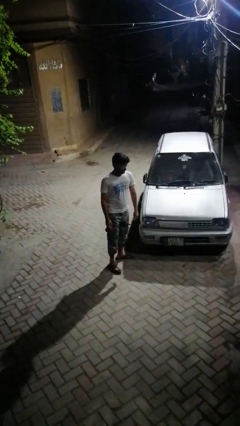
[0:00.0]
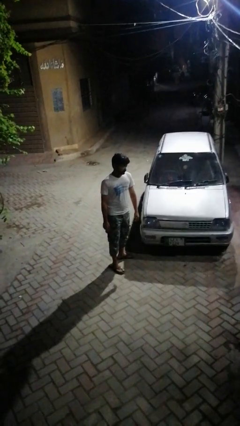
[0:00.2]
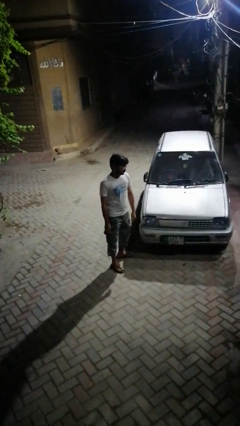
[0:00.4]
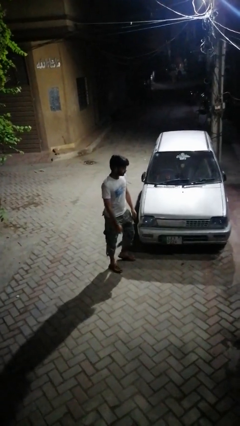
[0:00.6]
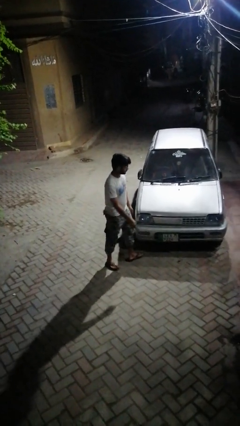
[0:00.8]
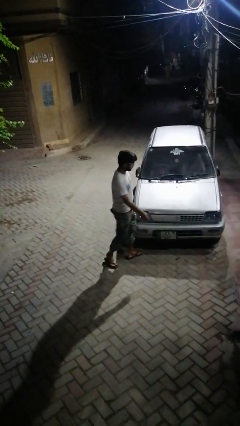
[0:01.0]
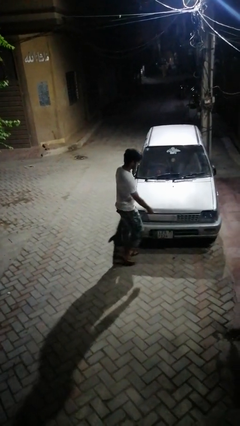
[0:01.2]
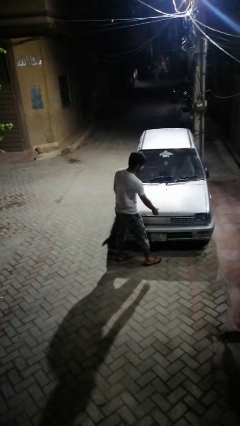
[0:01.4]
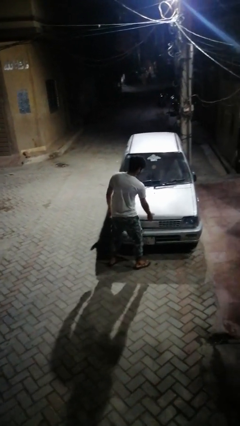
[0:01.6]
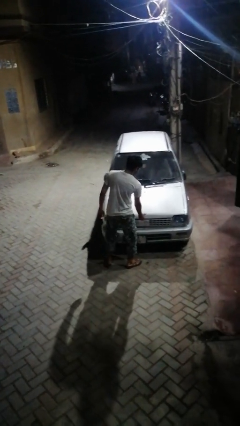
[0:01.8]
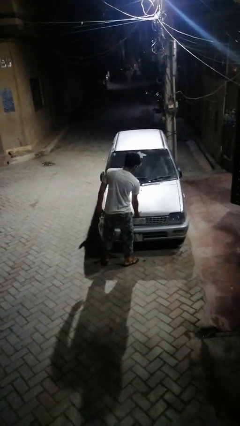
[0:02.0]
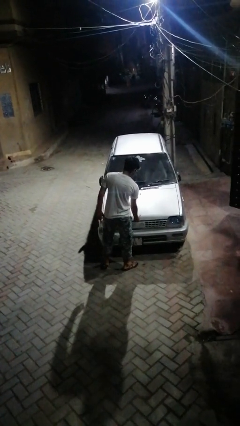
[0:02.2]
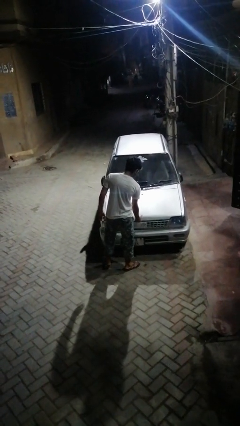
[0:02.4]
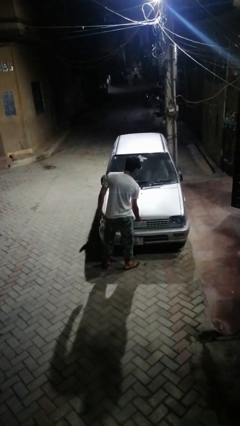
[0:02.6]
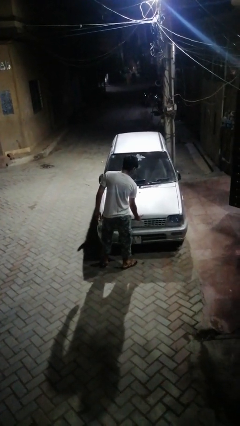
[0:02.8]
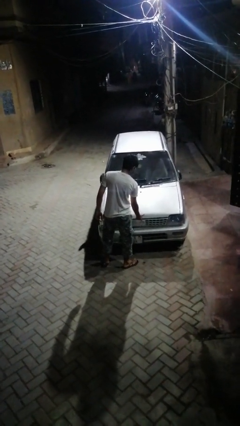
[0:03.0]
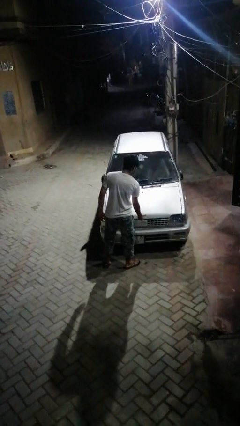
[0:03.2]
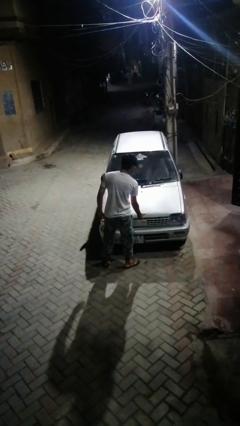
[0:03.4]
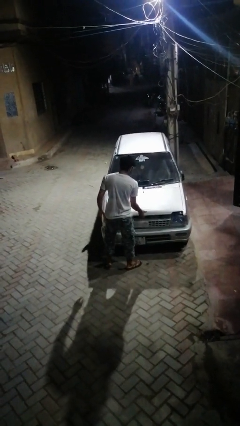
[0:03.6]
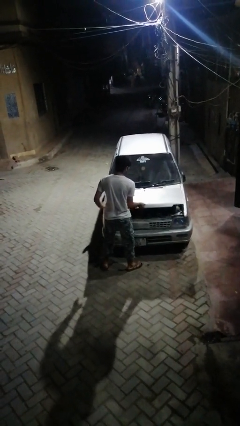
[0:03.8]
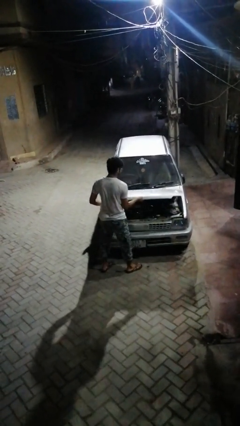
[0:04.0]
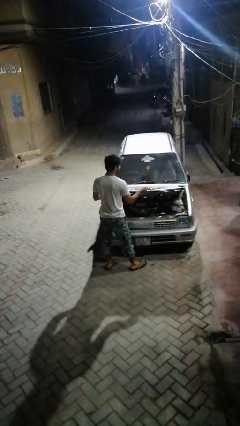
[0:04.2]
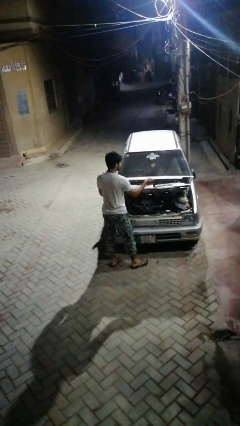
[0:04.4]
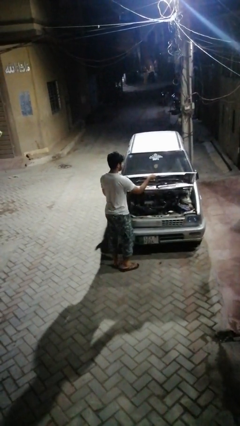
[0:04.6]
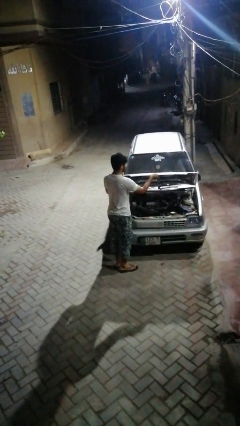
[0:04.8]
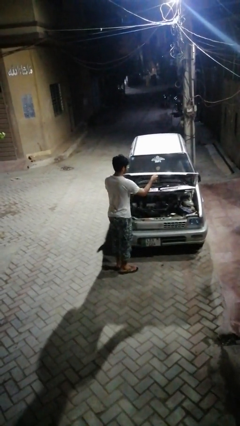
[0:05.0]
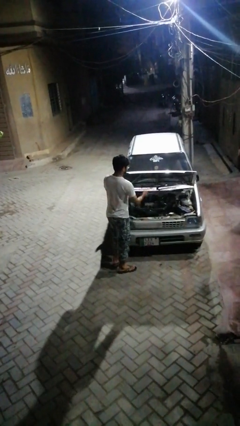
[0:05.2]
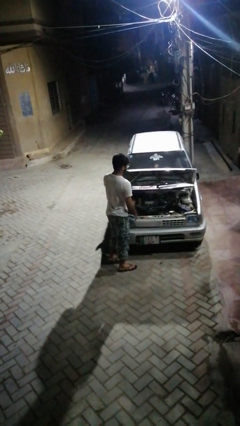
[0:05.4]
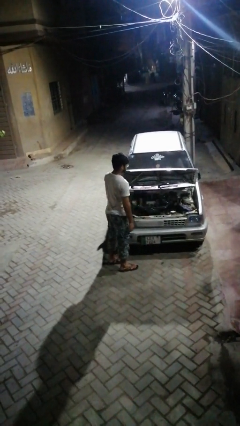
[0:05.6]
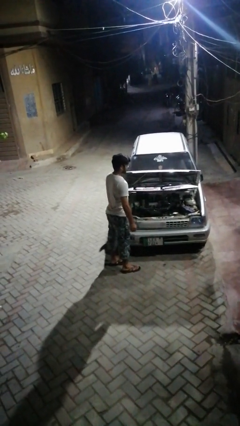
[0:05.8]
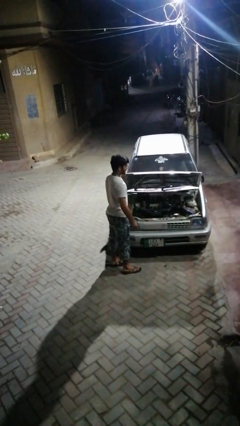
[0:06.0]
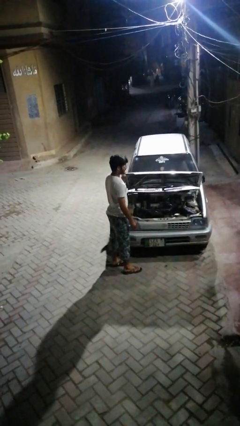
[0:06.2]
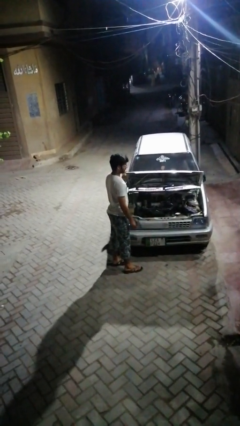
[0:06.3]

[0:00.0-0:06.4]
person opens car hood

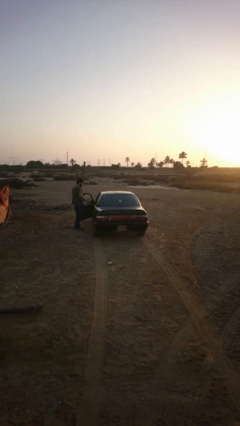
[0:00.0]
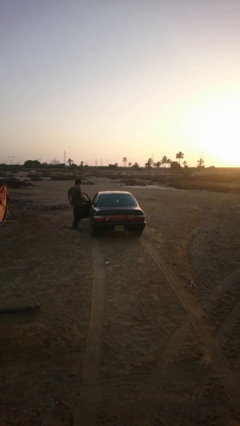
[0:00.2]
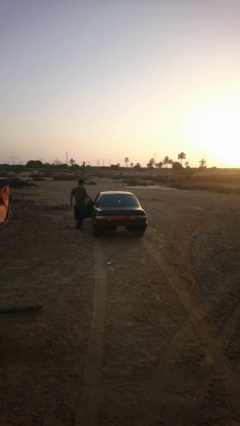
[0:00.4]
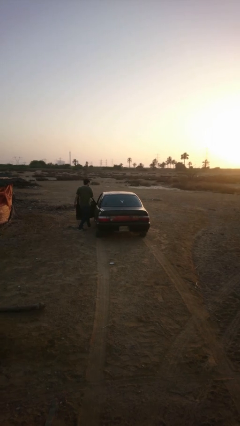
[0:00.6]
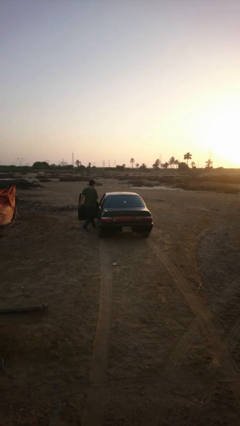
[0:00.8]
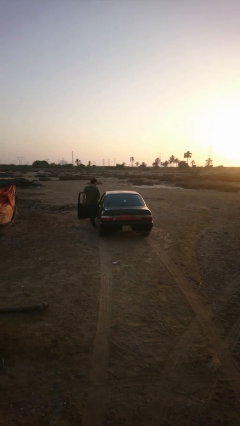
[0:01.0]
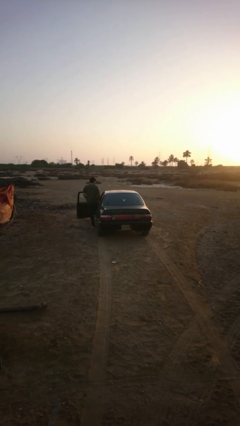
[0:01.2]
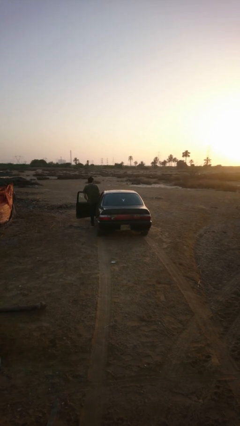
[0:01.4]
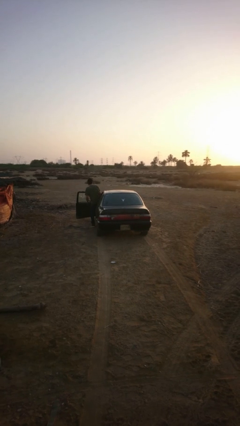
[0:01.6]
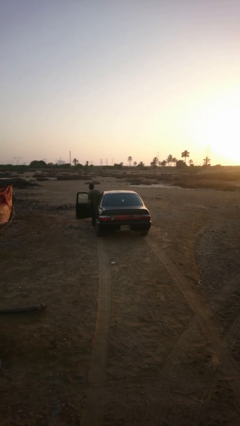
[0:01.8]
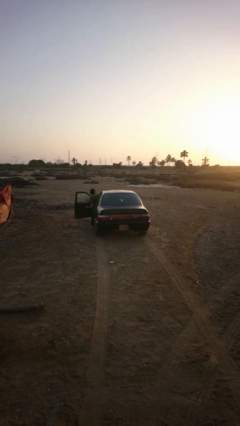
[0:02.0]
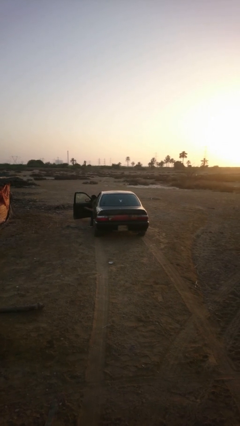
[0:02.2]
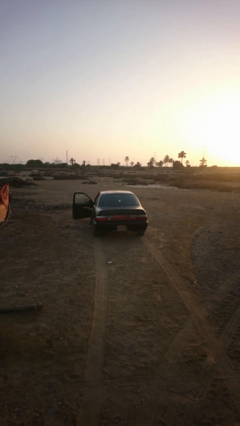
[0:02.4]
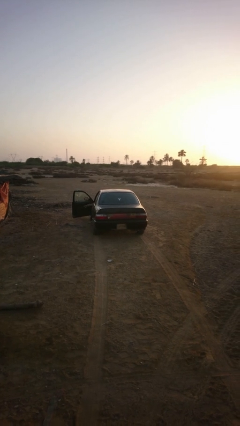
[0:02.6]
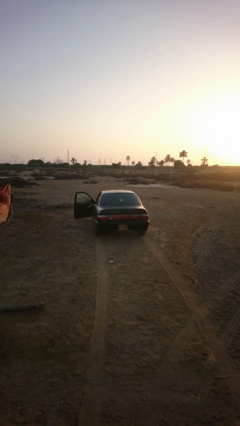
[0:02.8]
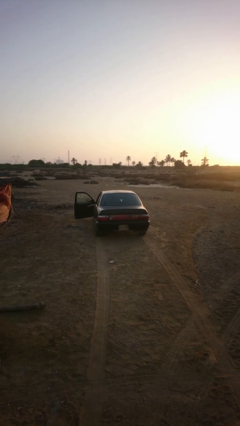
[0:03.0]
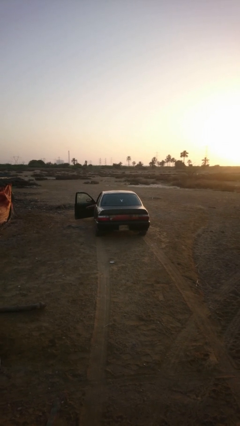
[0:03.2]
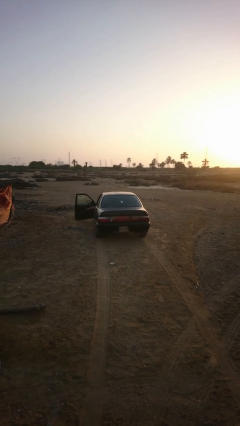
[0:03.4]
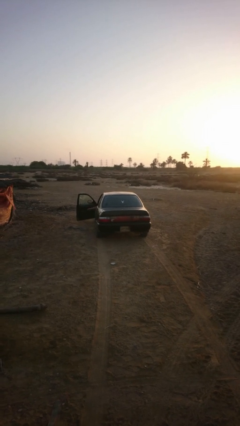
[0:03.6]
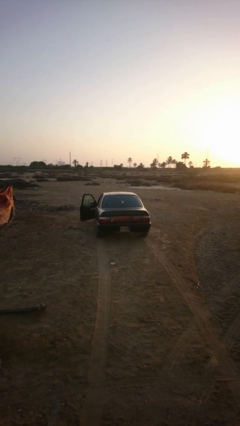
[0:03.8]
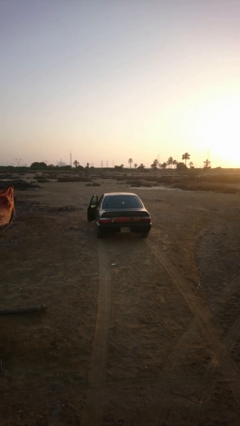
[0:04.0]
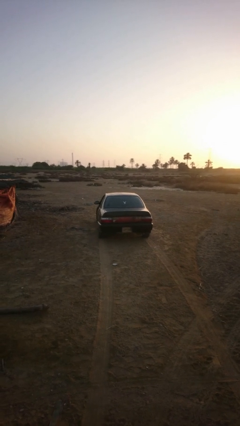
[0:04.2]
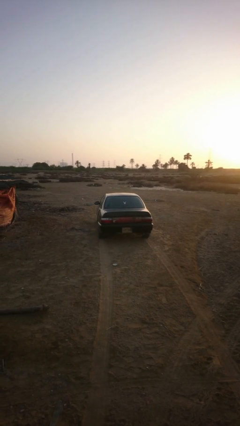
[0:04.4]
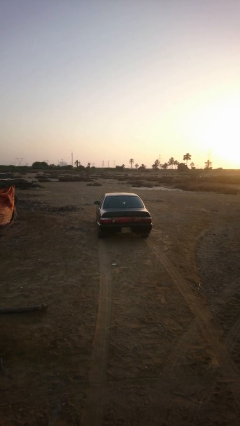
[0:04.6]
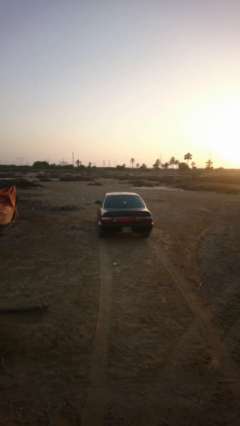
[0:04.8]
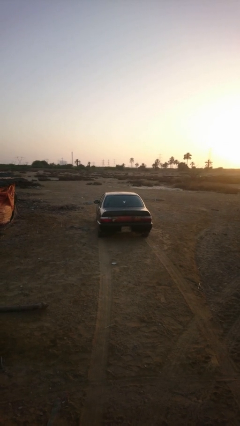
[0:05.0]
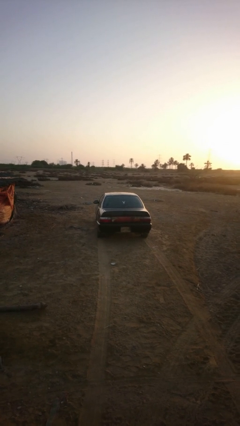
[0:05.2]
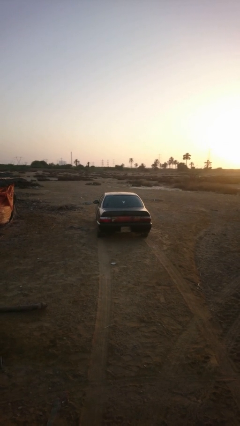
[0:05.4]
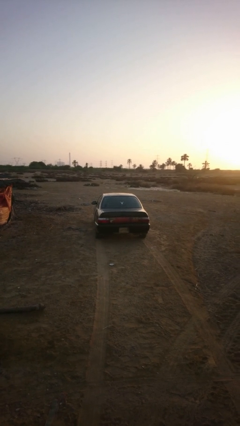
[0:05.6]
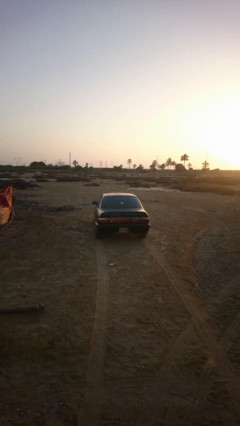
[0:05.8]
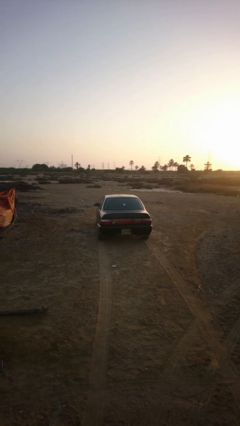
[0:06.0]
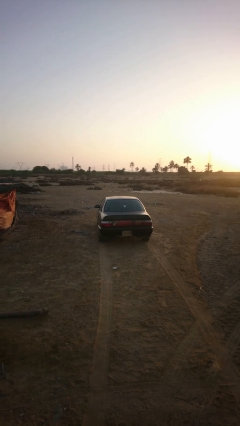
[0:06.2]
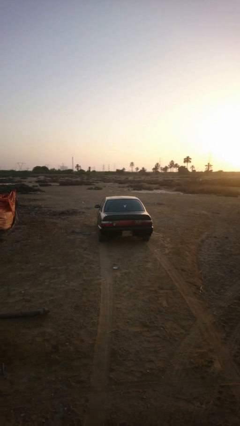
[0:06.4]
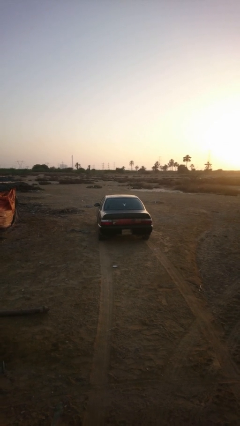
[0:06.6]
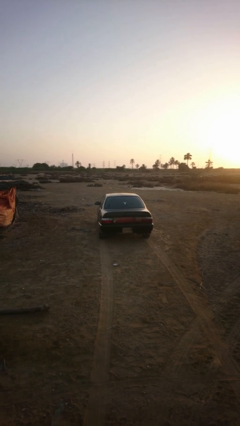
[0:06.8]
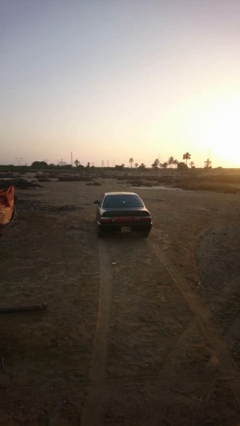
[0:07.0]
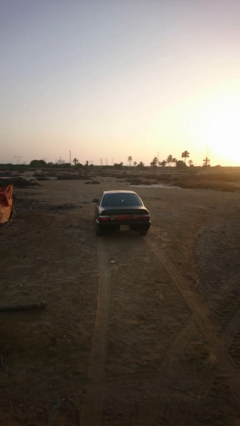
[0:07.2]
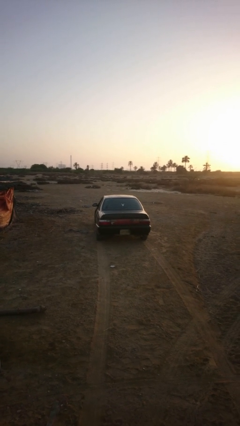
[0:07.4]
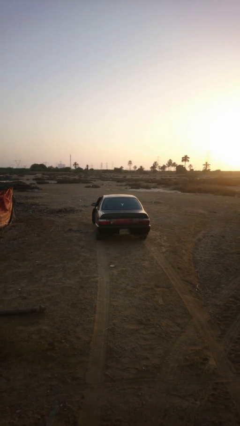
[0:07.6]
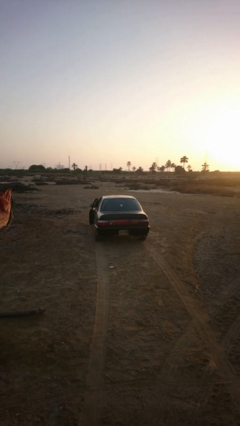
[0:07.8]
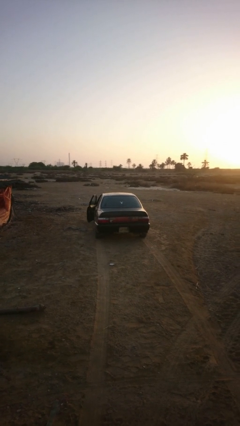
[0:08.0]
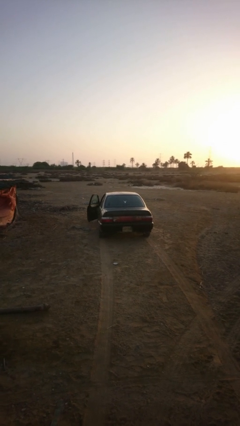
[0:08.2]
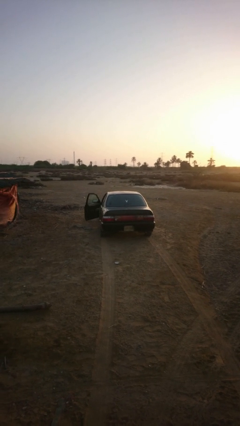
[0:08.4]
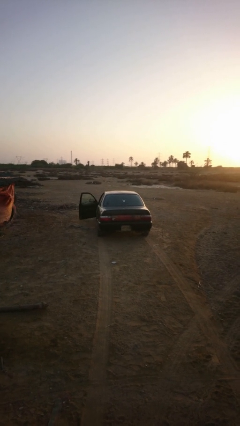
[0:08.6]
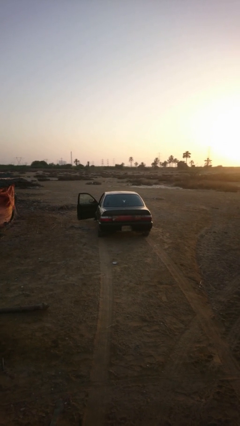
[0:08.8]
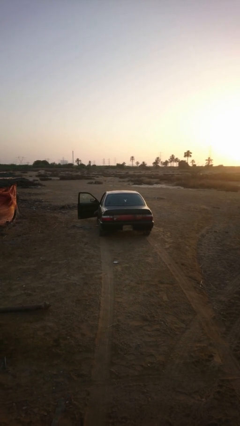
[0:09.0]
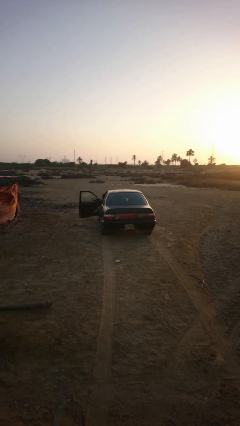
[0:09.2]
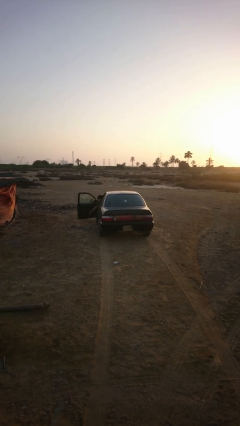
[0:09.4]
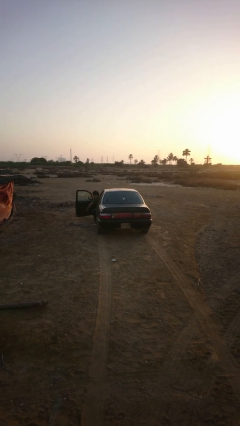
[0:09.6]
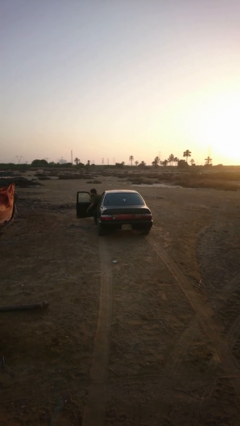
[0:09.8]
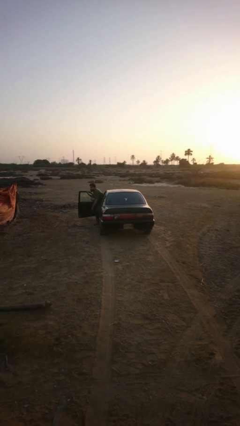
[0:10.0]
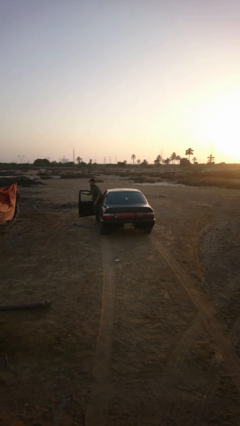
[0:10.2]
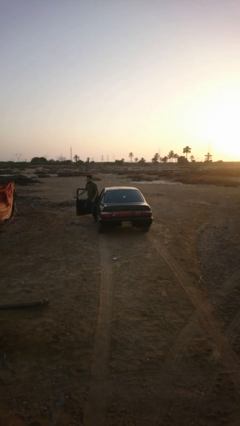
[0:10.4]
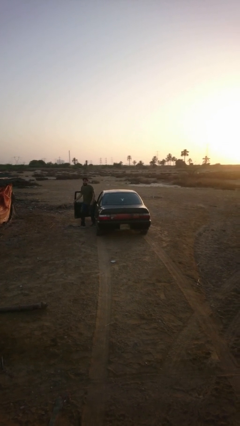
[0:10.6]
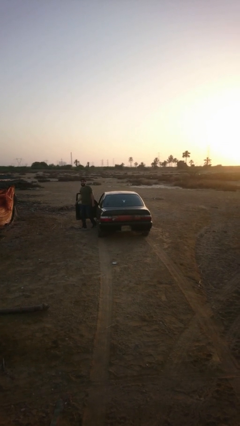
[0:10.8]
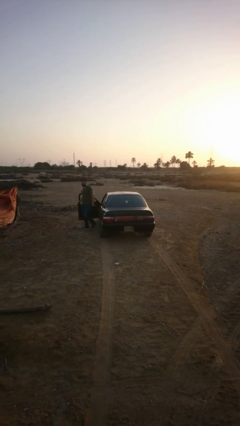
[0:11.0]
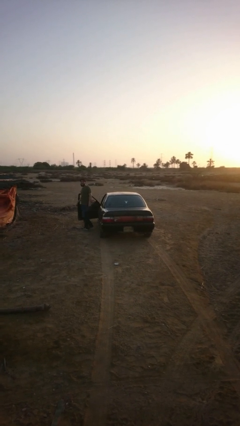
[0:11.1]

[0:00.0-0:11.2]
car picks up person

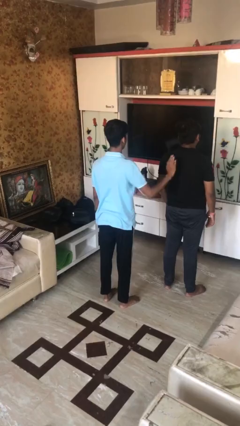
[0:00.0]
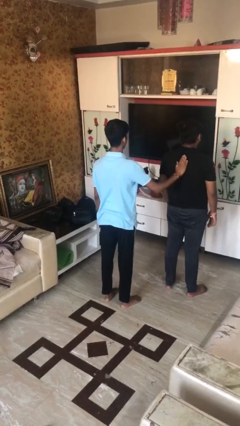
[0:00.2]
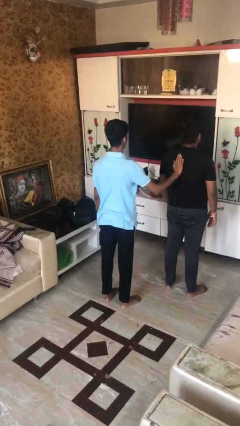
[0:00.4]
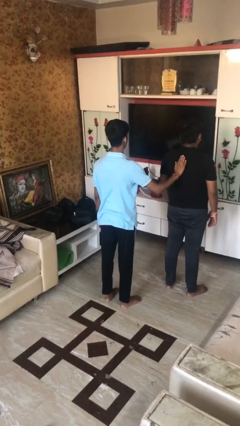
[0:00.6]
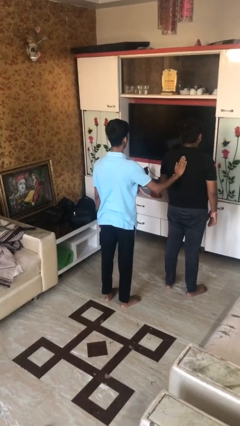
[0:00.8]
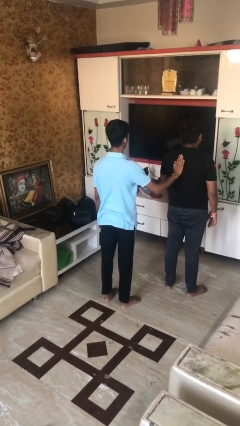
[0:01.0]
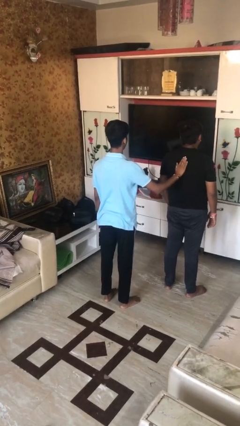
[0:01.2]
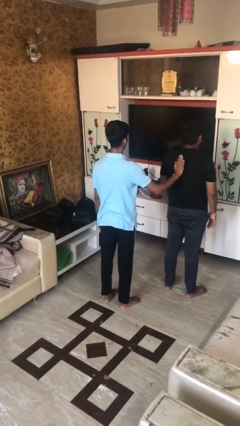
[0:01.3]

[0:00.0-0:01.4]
person touches back of person
